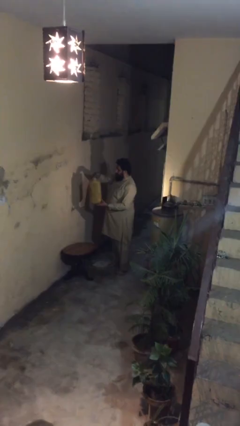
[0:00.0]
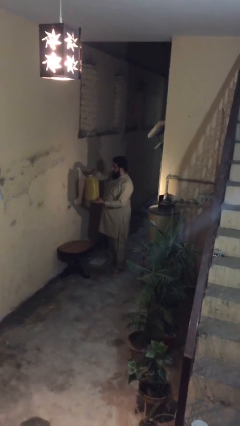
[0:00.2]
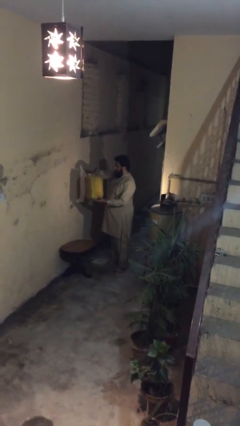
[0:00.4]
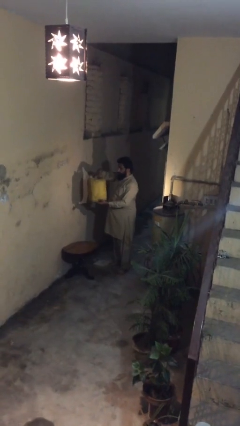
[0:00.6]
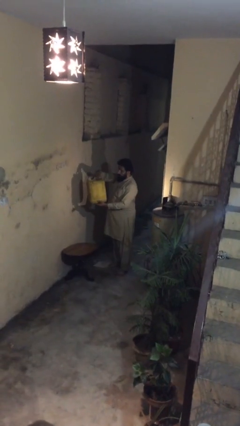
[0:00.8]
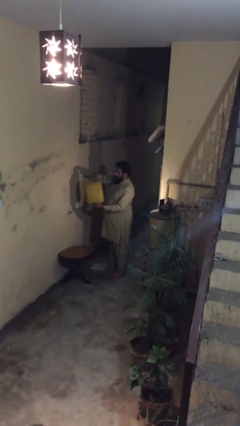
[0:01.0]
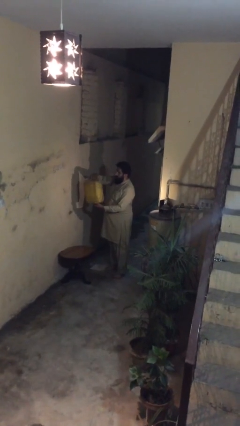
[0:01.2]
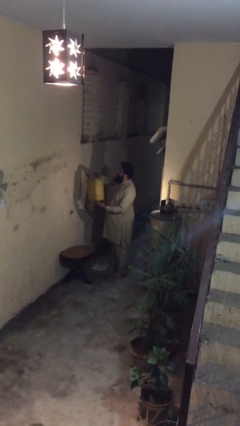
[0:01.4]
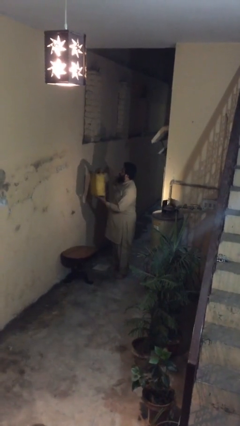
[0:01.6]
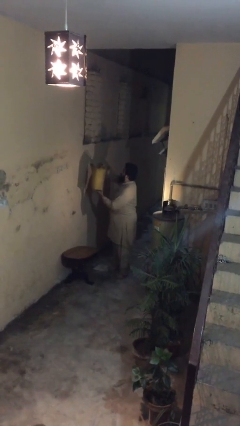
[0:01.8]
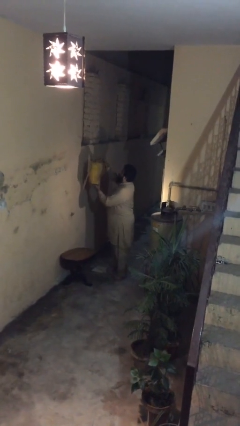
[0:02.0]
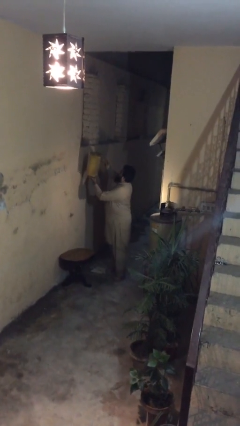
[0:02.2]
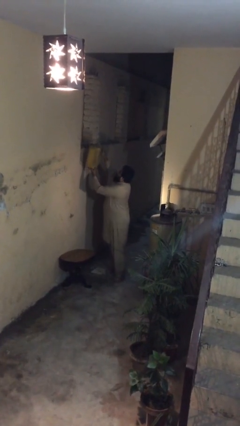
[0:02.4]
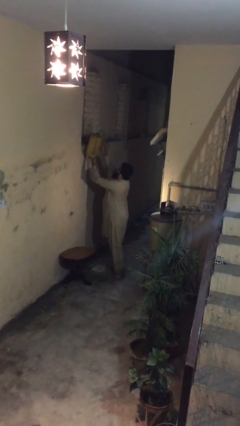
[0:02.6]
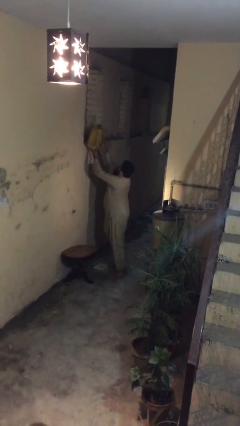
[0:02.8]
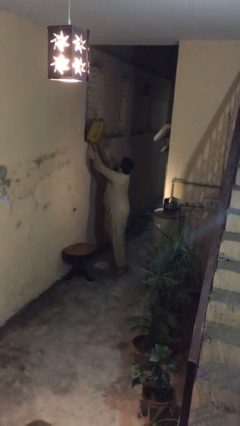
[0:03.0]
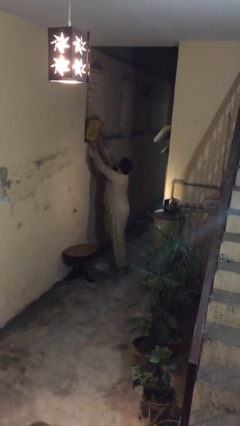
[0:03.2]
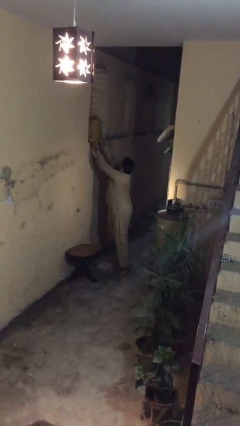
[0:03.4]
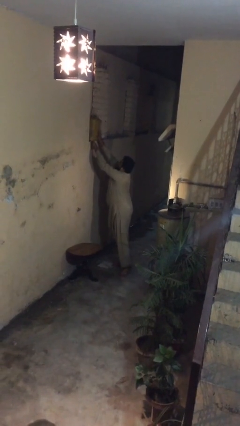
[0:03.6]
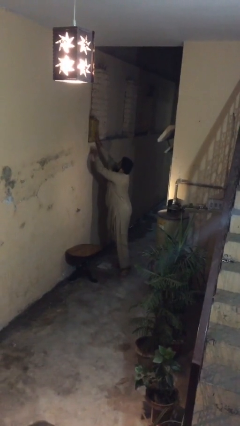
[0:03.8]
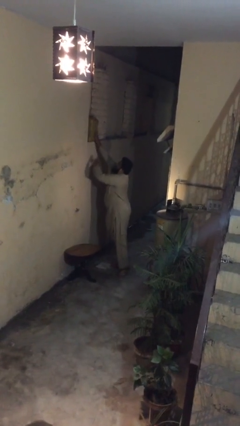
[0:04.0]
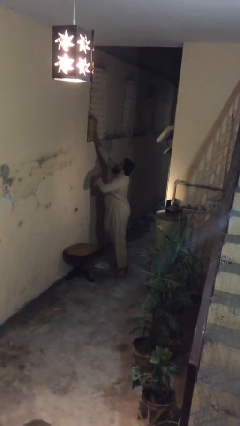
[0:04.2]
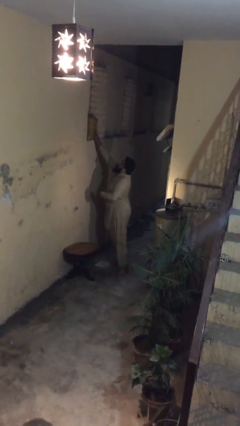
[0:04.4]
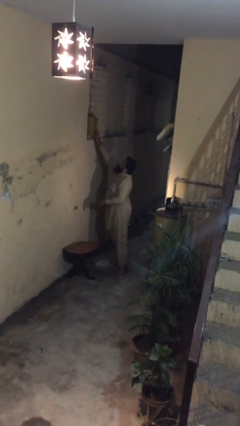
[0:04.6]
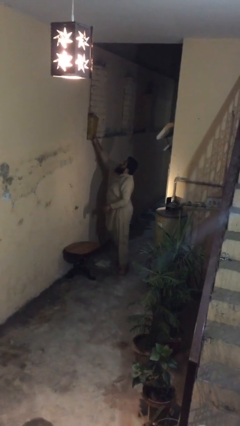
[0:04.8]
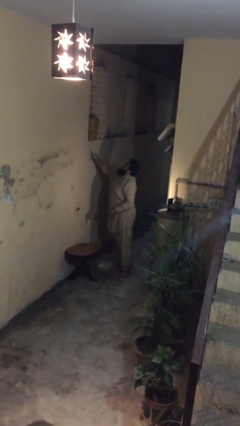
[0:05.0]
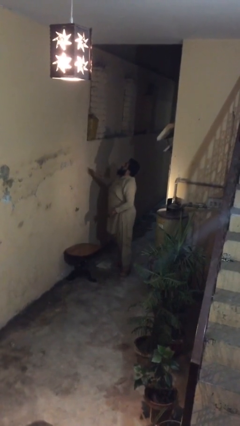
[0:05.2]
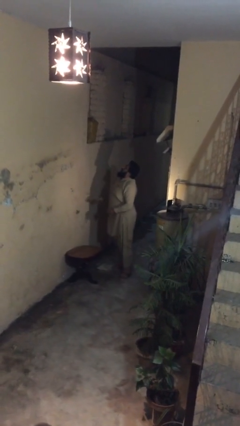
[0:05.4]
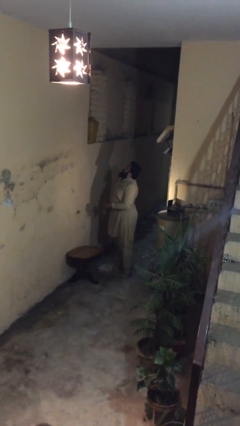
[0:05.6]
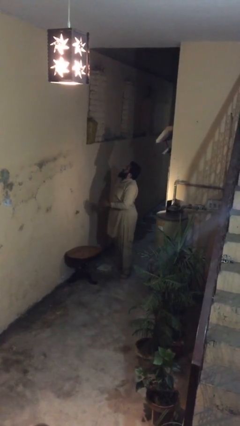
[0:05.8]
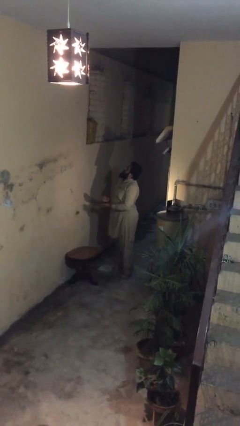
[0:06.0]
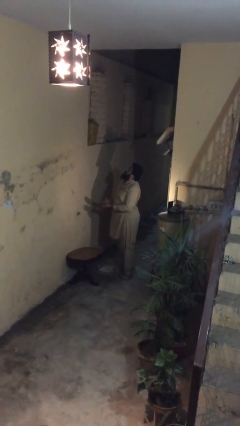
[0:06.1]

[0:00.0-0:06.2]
person puts down object on shelf

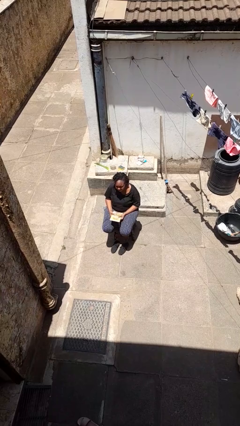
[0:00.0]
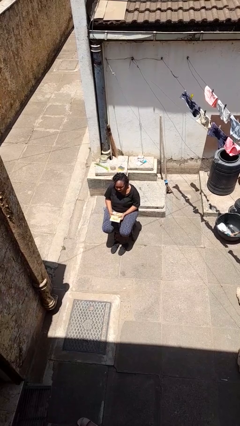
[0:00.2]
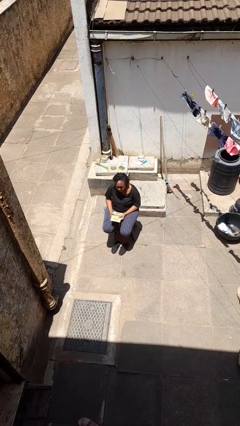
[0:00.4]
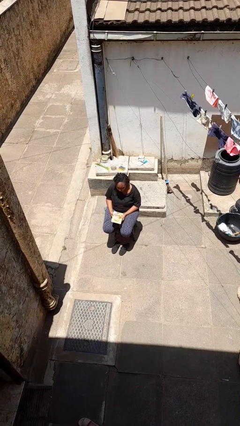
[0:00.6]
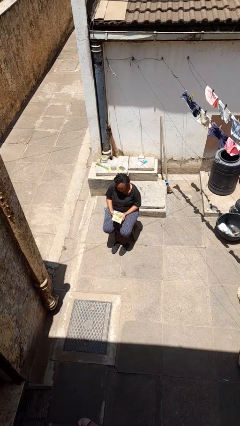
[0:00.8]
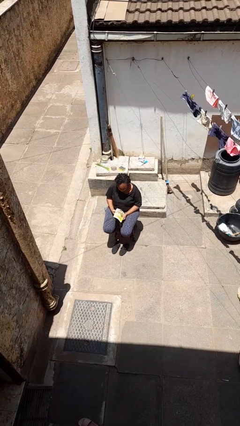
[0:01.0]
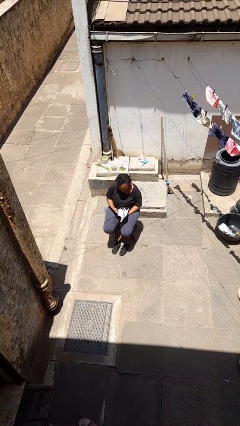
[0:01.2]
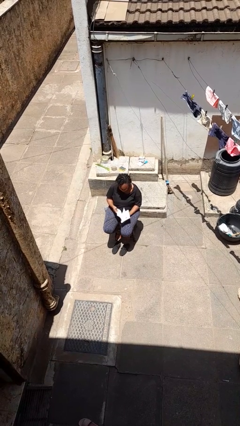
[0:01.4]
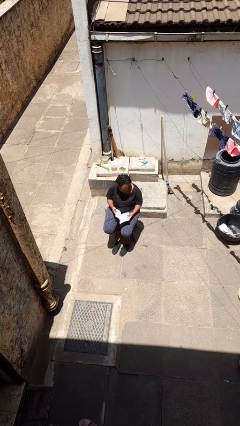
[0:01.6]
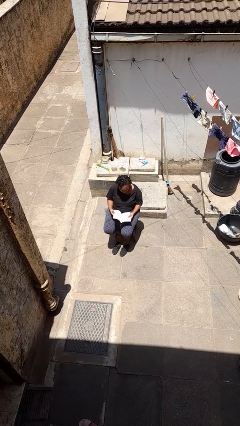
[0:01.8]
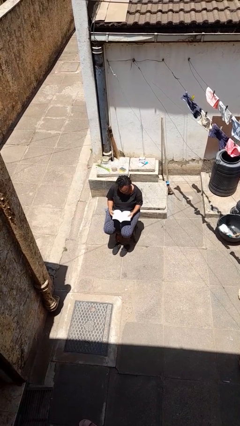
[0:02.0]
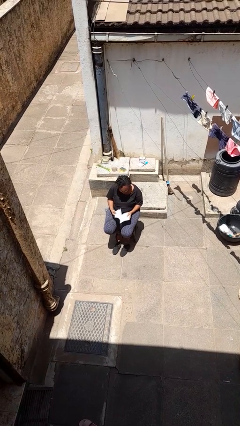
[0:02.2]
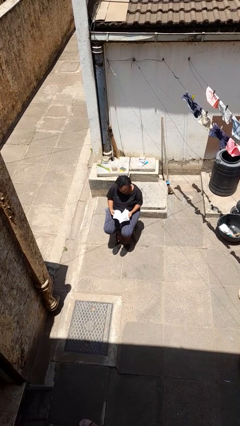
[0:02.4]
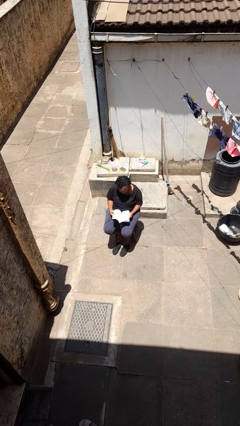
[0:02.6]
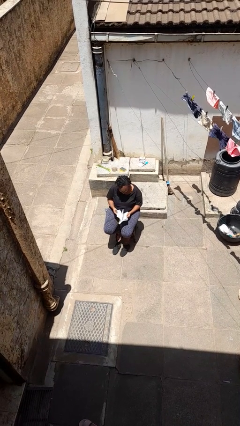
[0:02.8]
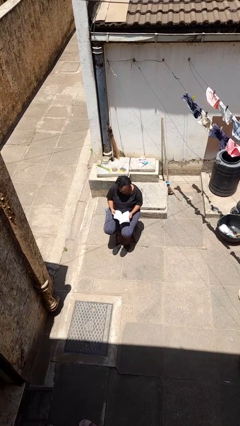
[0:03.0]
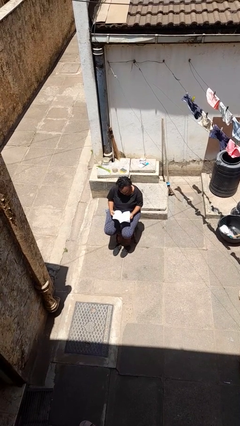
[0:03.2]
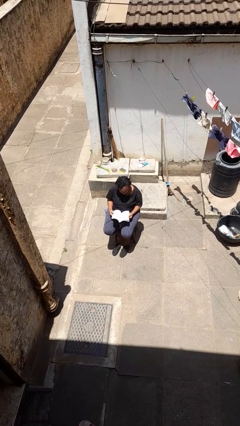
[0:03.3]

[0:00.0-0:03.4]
person reads book

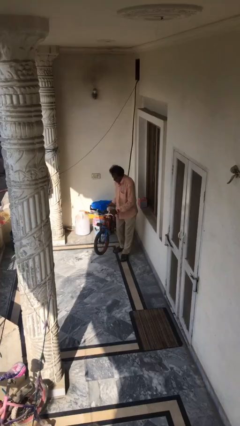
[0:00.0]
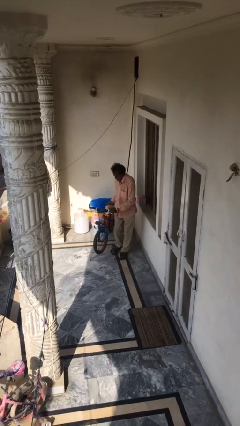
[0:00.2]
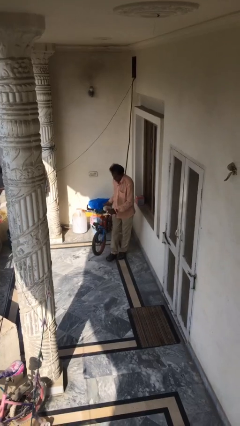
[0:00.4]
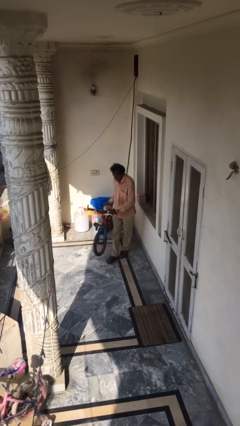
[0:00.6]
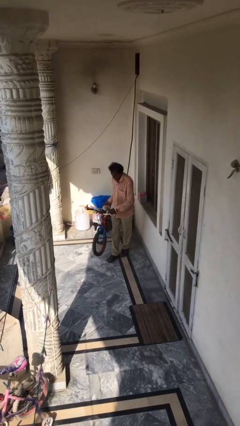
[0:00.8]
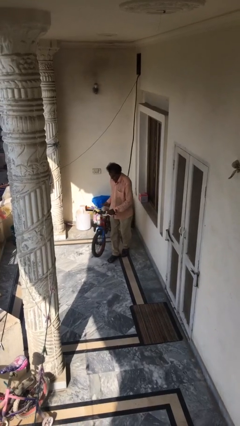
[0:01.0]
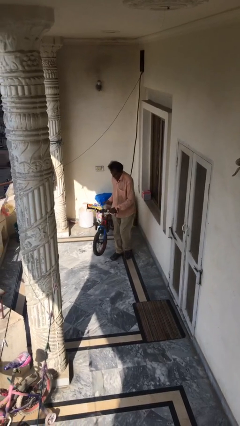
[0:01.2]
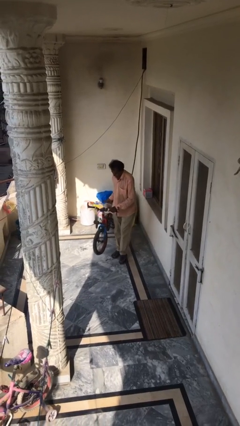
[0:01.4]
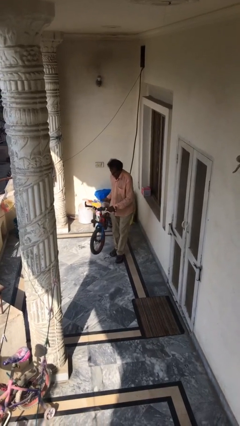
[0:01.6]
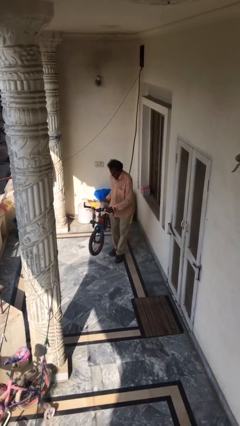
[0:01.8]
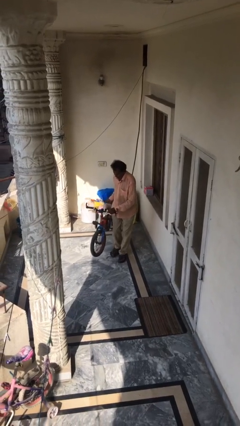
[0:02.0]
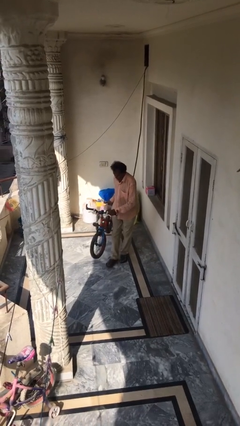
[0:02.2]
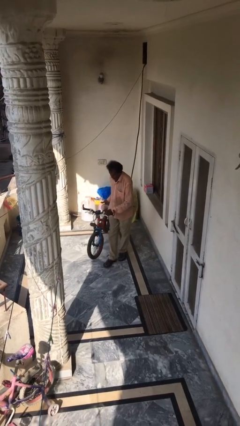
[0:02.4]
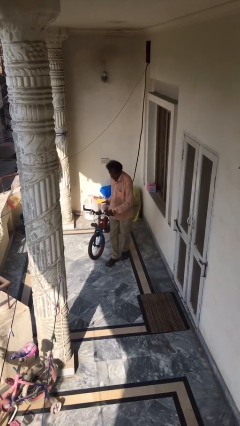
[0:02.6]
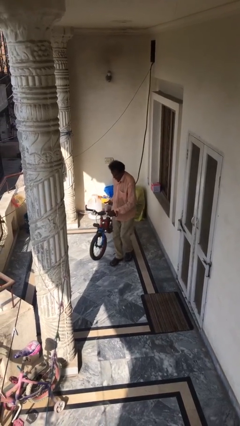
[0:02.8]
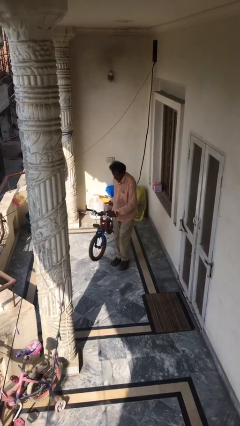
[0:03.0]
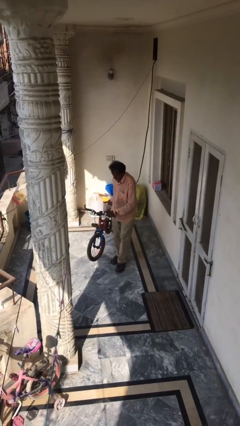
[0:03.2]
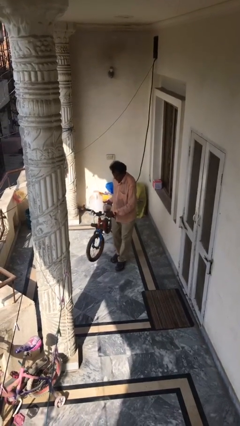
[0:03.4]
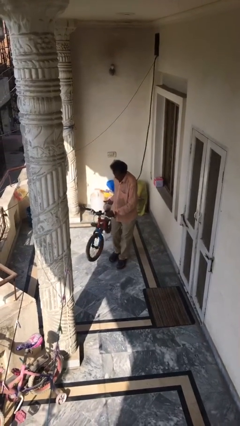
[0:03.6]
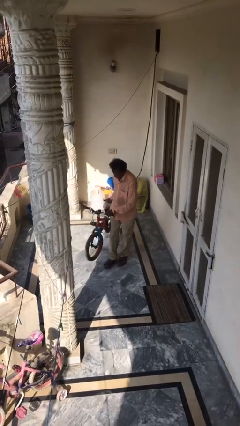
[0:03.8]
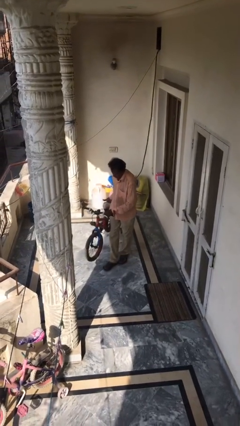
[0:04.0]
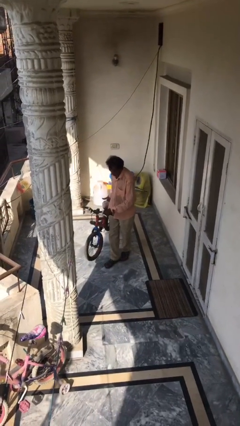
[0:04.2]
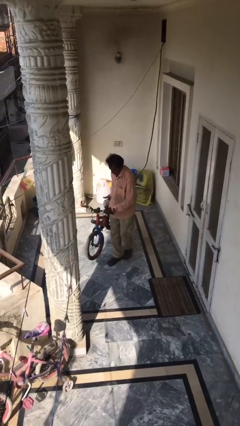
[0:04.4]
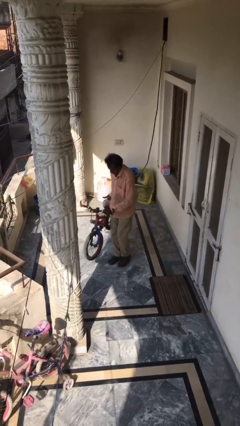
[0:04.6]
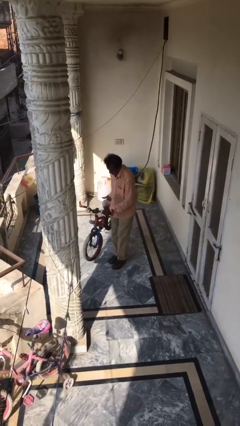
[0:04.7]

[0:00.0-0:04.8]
person carries heavy object

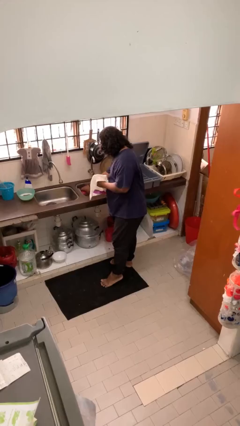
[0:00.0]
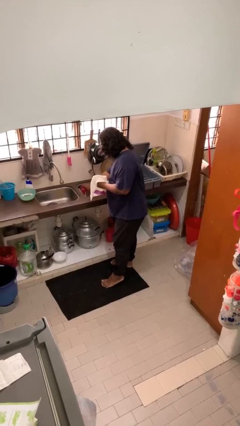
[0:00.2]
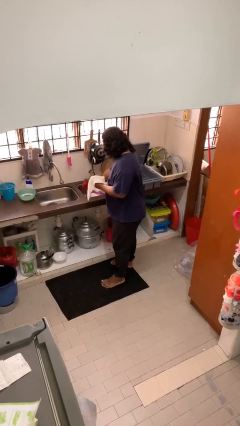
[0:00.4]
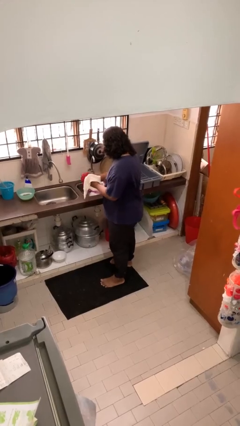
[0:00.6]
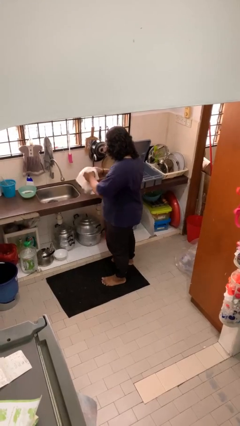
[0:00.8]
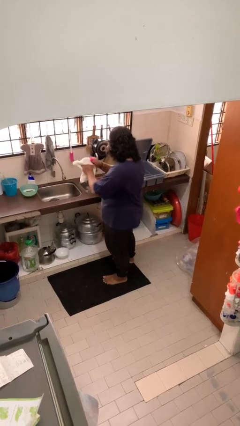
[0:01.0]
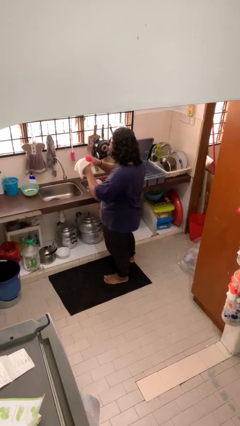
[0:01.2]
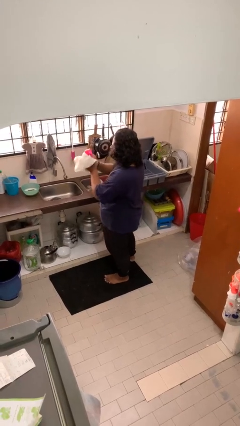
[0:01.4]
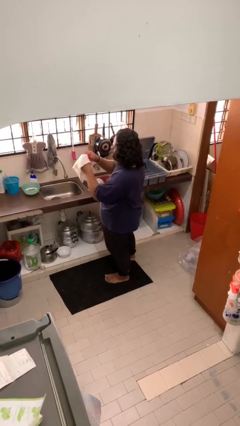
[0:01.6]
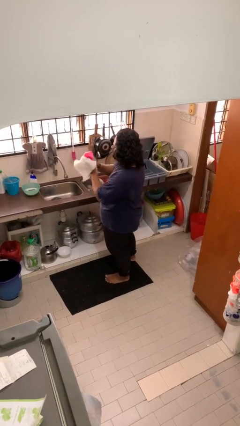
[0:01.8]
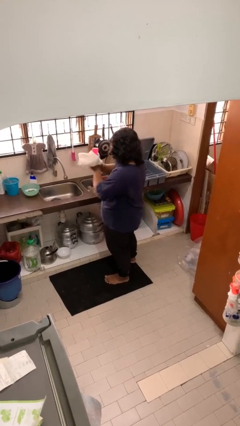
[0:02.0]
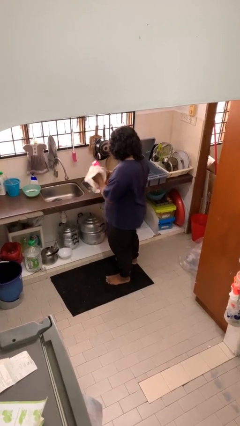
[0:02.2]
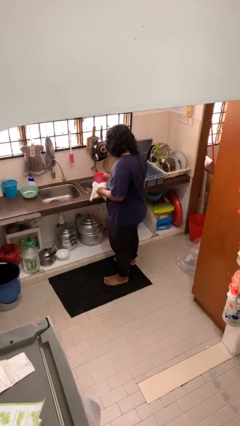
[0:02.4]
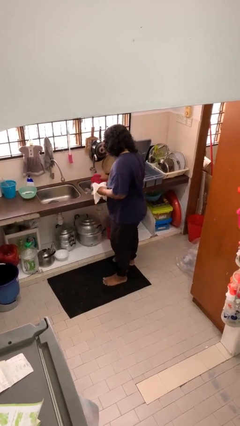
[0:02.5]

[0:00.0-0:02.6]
person dries dish

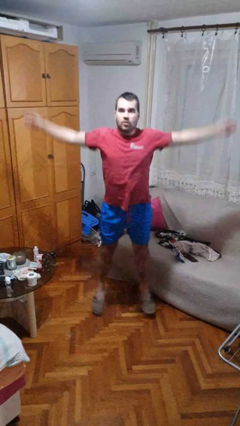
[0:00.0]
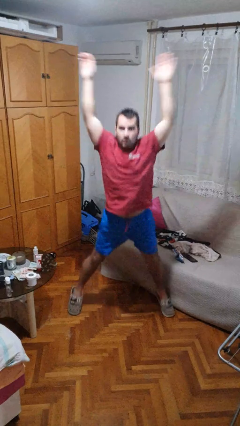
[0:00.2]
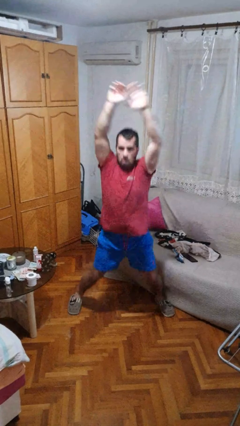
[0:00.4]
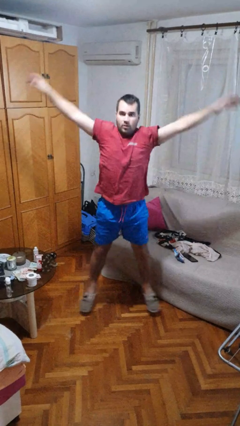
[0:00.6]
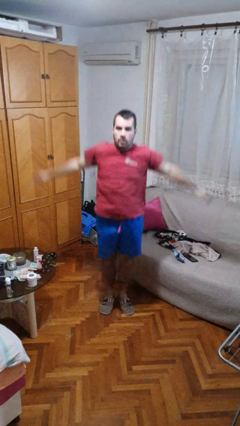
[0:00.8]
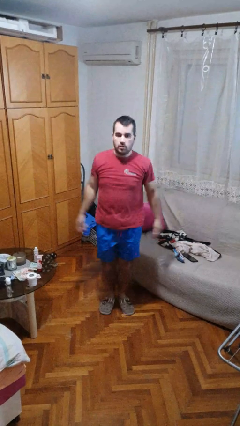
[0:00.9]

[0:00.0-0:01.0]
person exercises with jumping jacks
